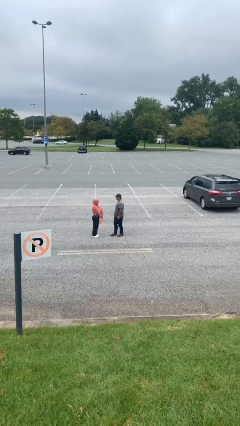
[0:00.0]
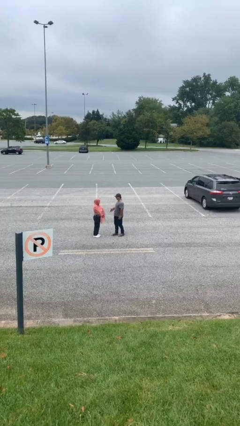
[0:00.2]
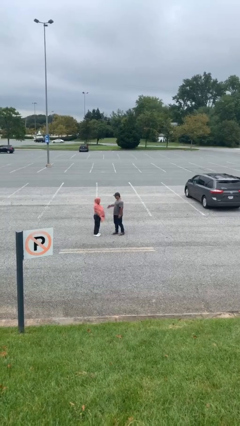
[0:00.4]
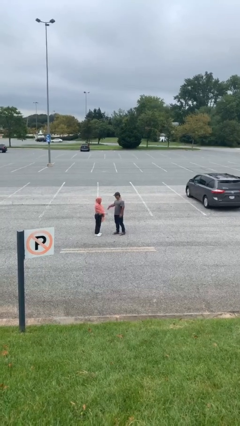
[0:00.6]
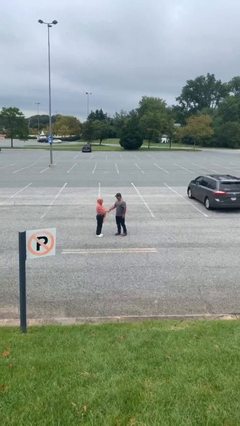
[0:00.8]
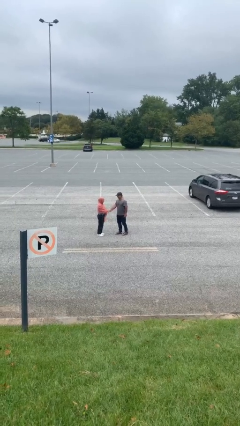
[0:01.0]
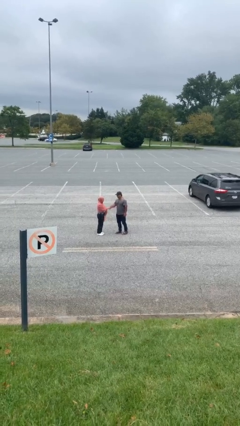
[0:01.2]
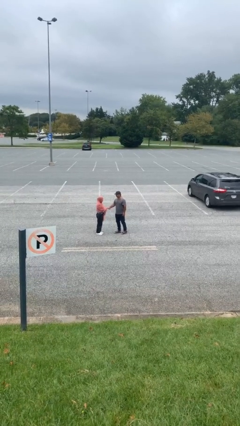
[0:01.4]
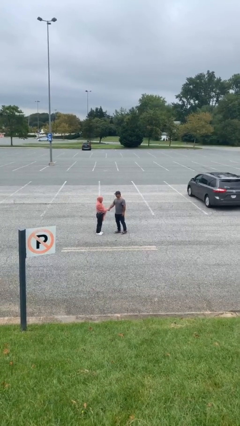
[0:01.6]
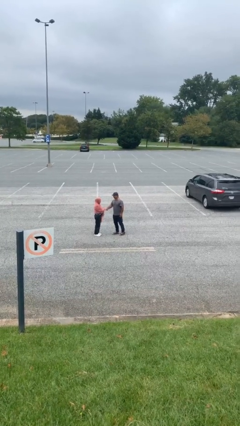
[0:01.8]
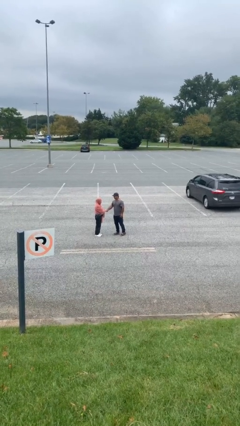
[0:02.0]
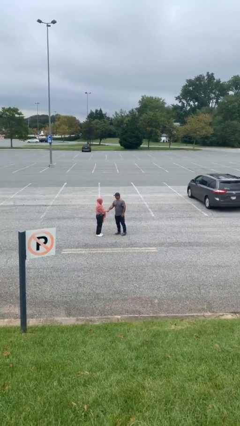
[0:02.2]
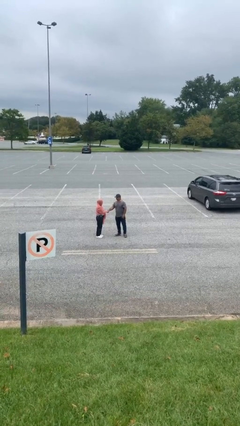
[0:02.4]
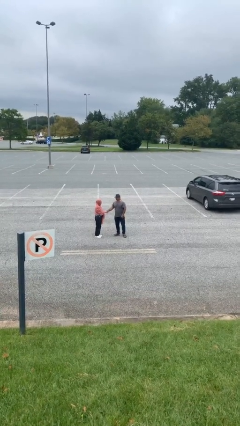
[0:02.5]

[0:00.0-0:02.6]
person shakes hand

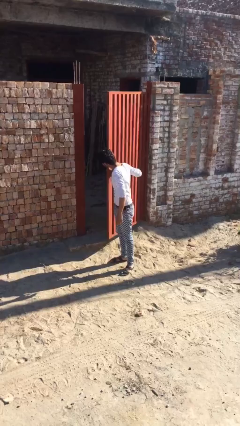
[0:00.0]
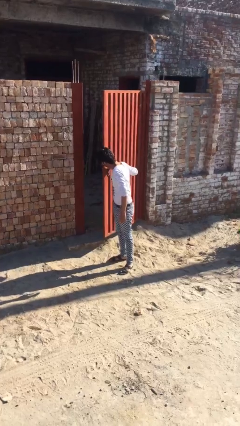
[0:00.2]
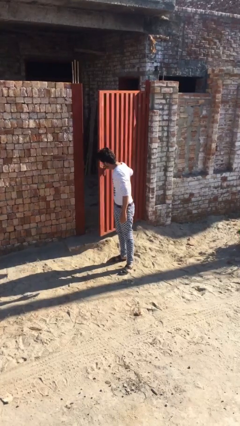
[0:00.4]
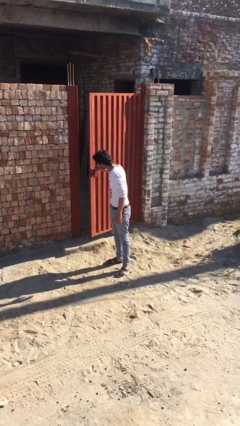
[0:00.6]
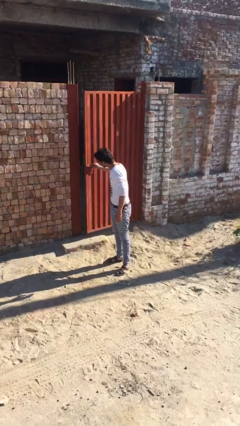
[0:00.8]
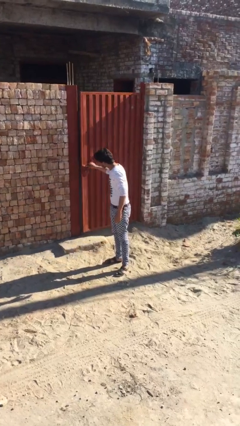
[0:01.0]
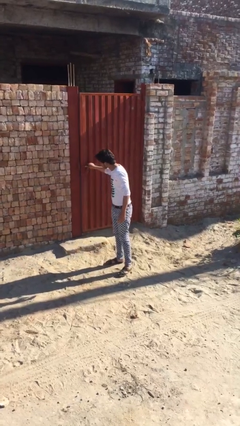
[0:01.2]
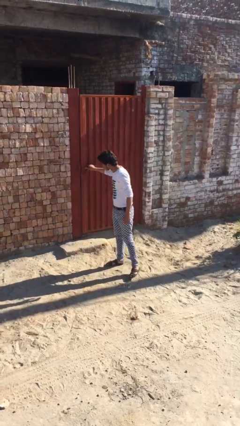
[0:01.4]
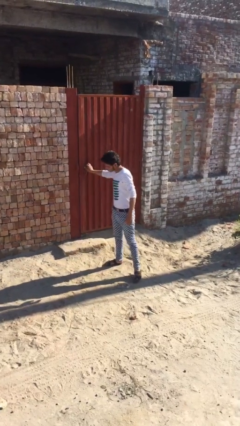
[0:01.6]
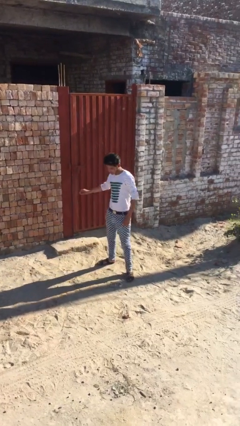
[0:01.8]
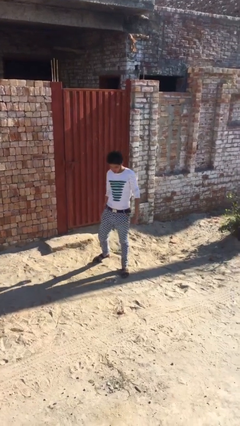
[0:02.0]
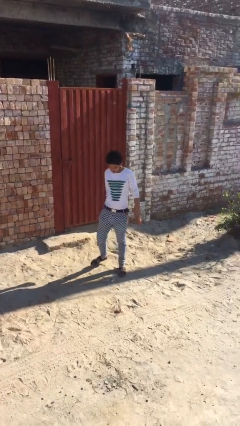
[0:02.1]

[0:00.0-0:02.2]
person closes facility door

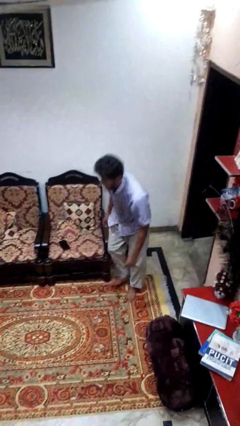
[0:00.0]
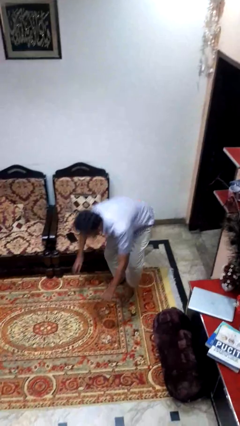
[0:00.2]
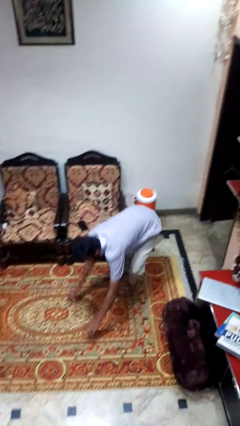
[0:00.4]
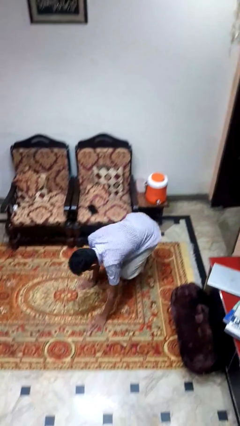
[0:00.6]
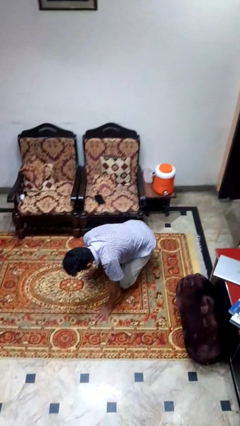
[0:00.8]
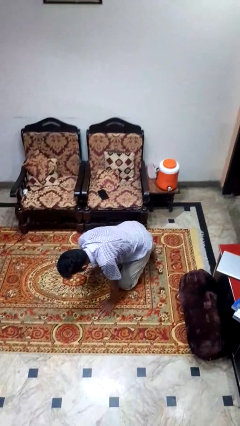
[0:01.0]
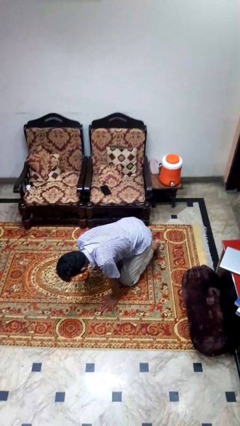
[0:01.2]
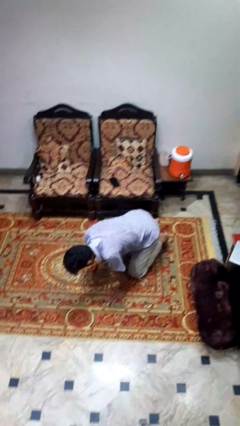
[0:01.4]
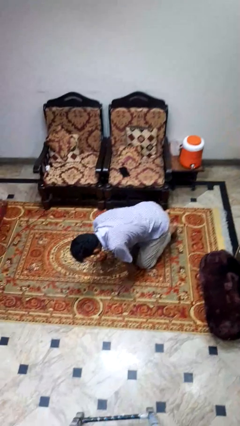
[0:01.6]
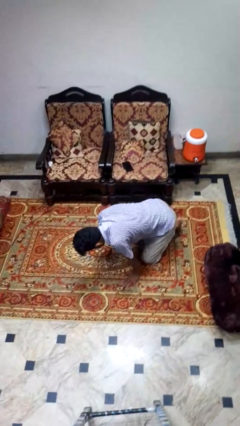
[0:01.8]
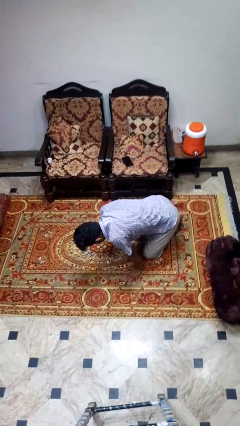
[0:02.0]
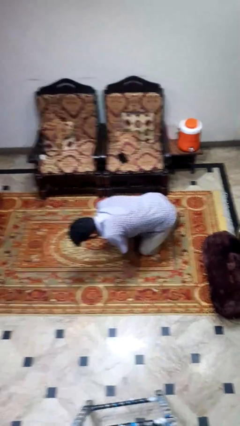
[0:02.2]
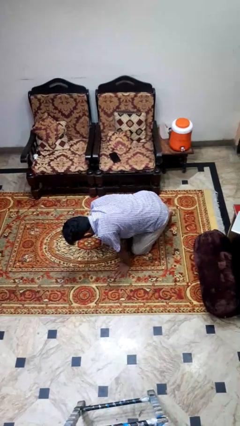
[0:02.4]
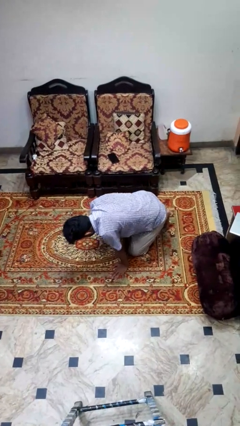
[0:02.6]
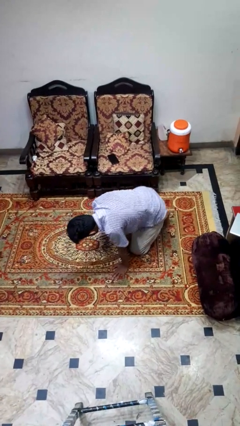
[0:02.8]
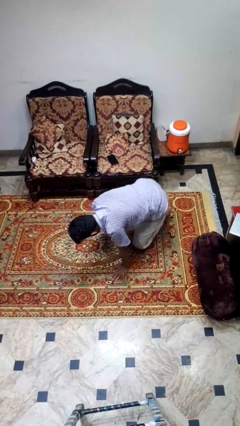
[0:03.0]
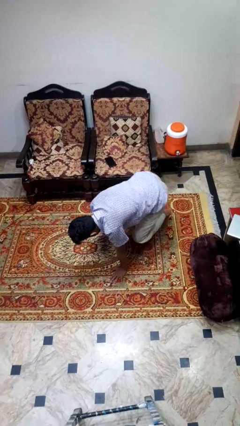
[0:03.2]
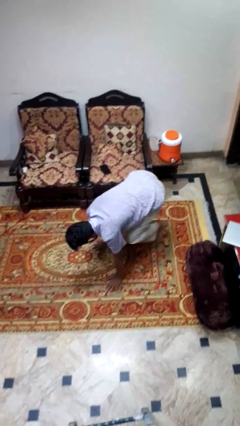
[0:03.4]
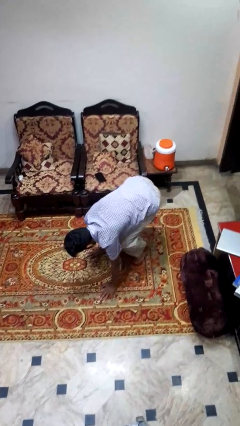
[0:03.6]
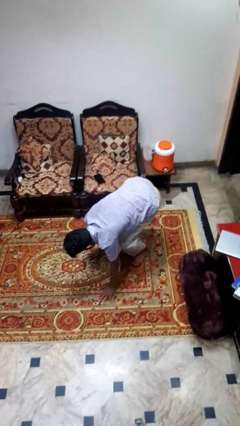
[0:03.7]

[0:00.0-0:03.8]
person trips on object on floor

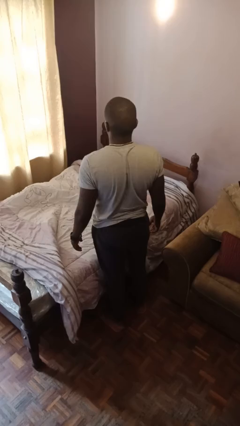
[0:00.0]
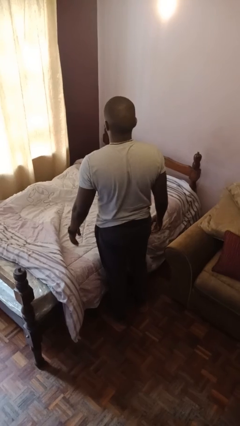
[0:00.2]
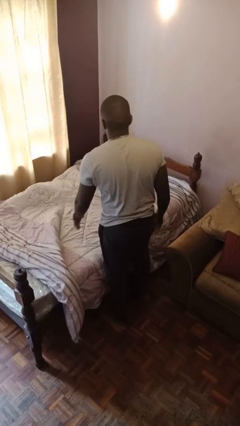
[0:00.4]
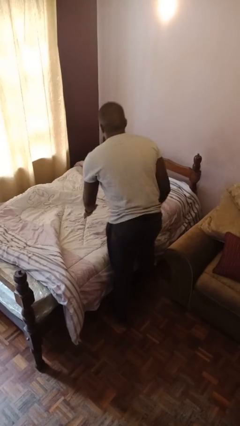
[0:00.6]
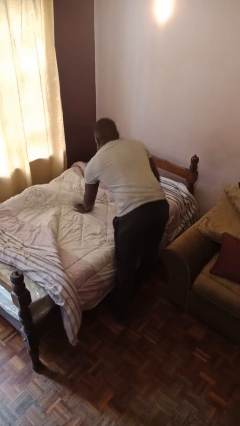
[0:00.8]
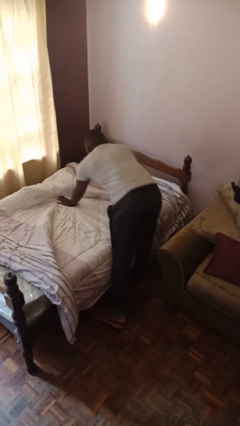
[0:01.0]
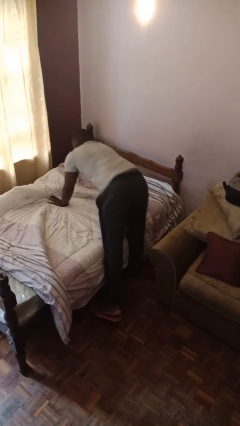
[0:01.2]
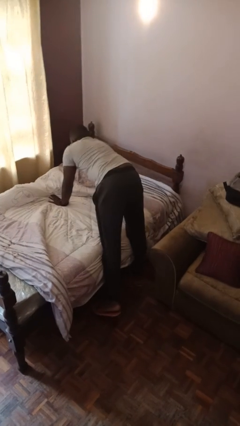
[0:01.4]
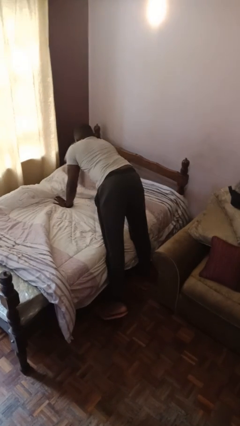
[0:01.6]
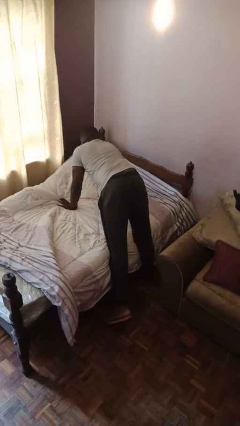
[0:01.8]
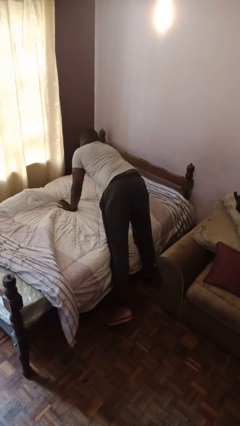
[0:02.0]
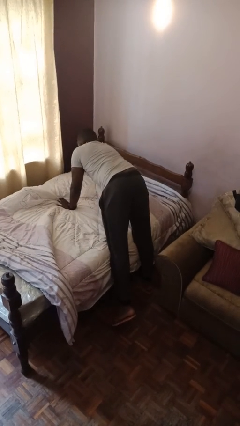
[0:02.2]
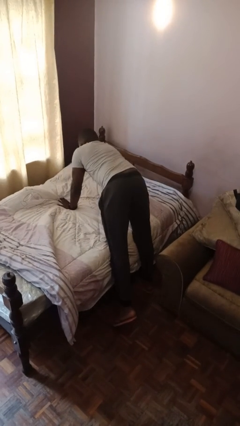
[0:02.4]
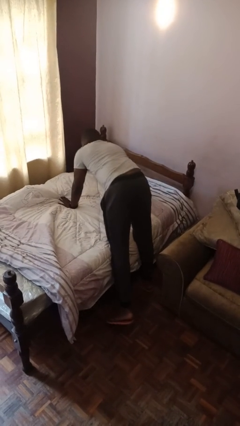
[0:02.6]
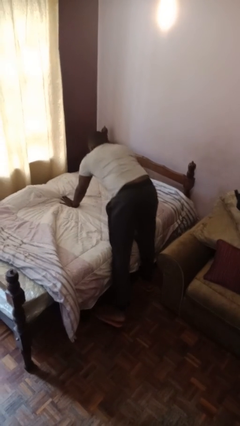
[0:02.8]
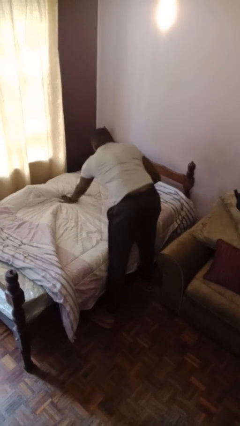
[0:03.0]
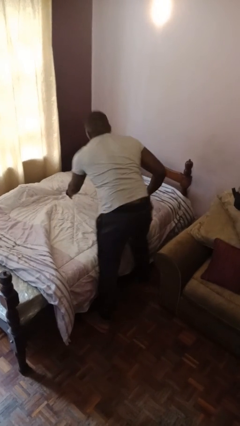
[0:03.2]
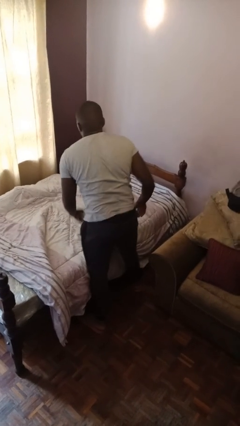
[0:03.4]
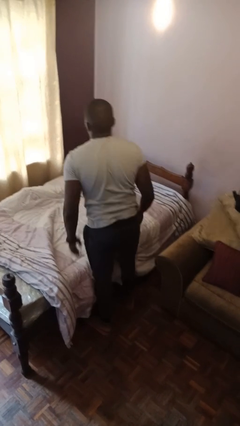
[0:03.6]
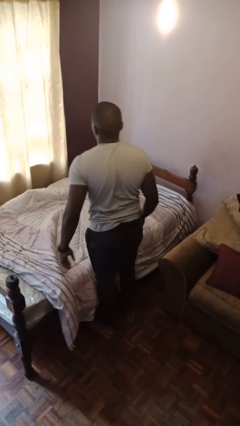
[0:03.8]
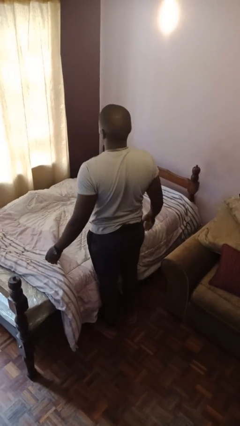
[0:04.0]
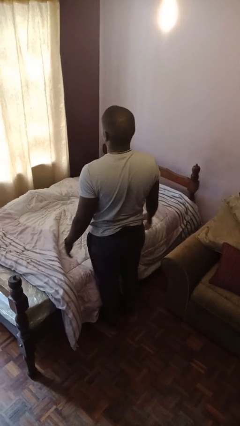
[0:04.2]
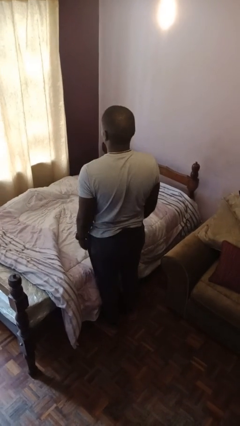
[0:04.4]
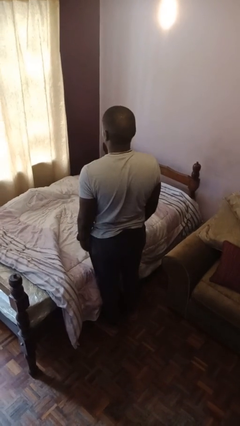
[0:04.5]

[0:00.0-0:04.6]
person makes bed

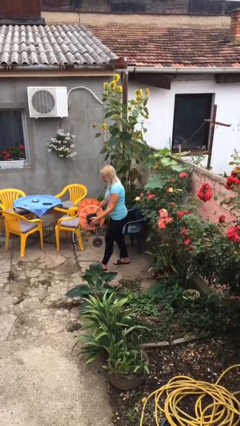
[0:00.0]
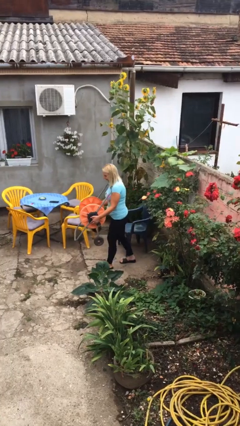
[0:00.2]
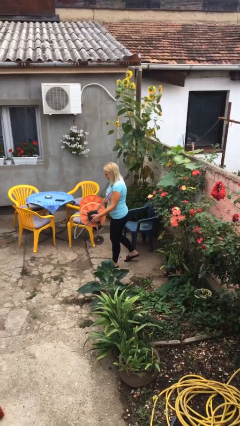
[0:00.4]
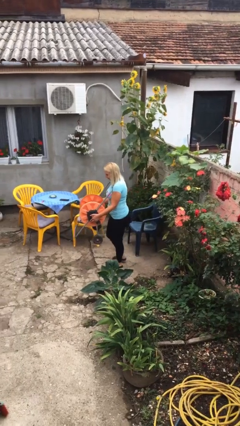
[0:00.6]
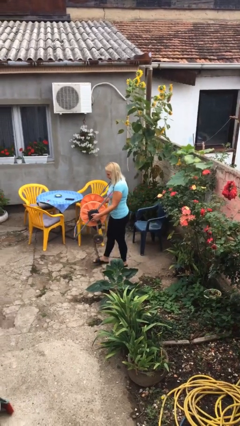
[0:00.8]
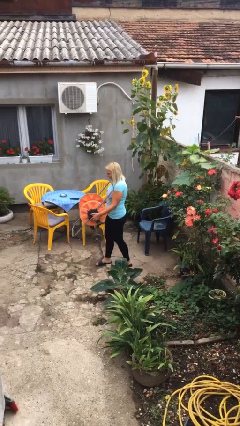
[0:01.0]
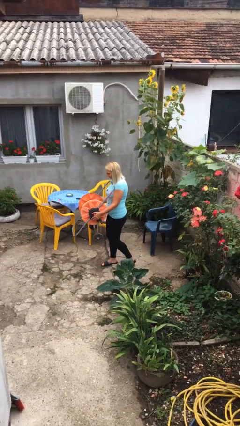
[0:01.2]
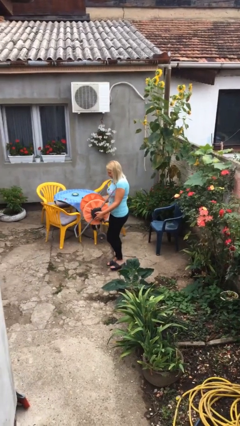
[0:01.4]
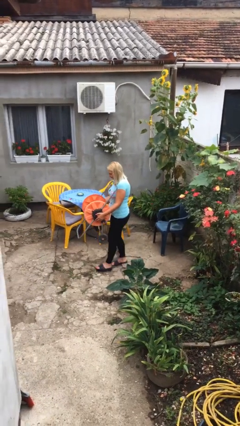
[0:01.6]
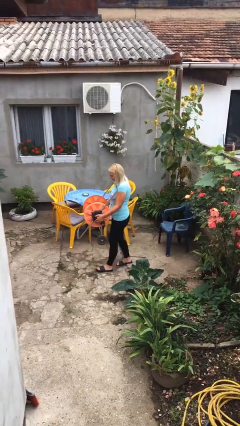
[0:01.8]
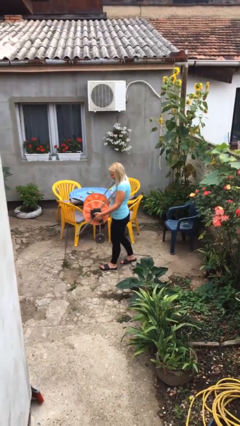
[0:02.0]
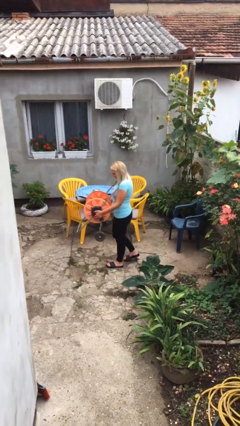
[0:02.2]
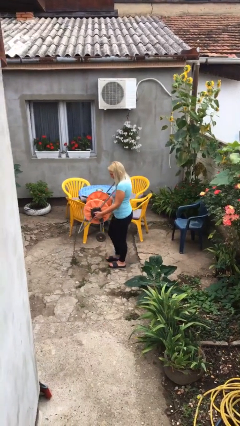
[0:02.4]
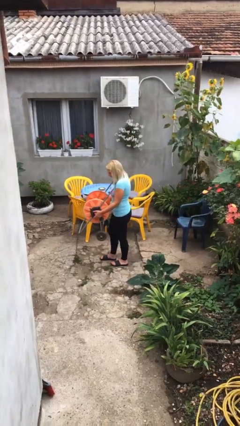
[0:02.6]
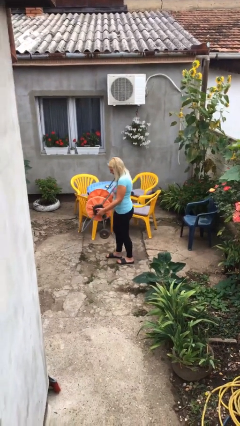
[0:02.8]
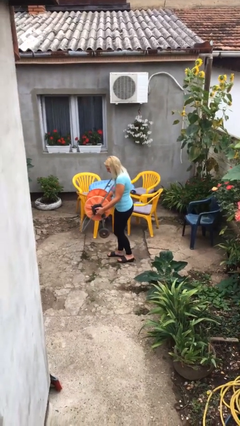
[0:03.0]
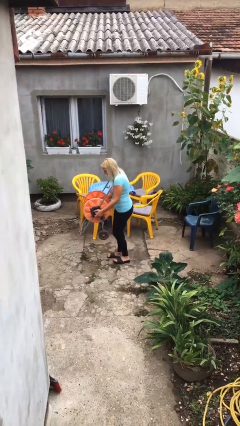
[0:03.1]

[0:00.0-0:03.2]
person carries heavy object

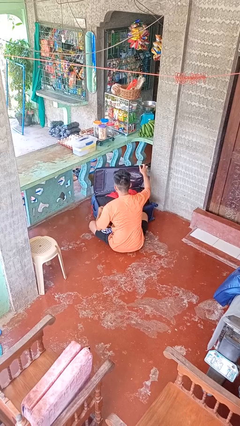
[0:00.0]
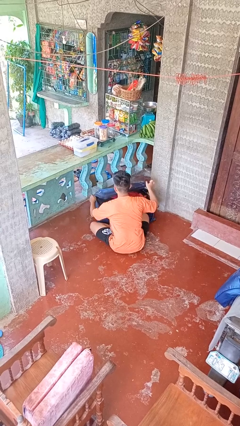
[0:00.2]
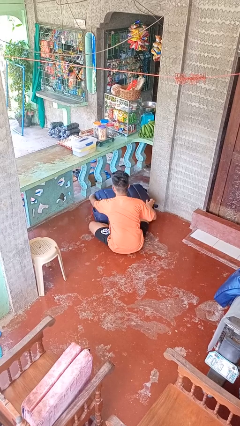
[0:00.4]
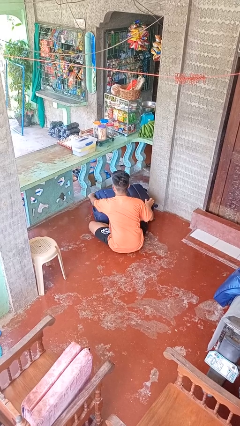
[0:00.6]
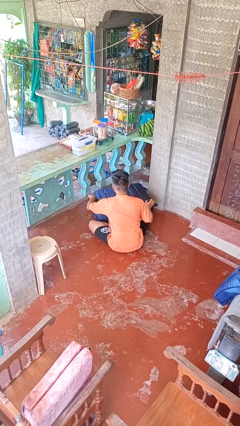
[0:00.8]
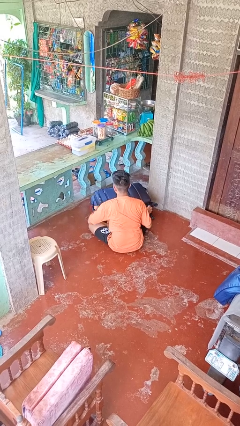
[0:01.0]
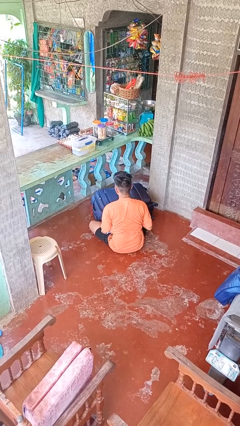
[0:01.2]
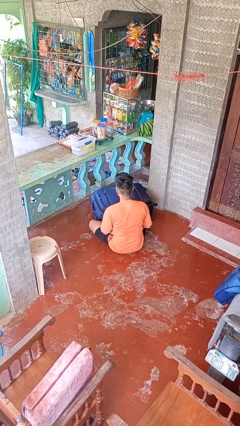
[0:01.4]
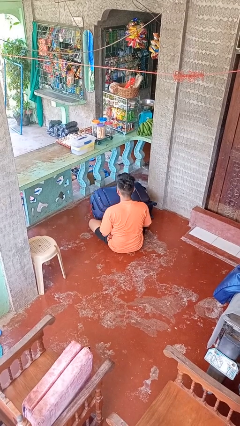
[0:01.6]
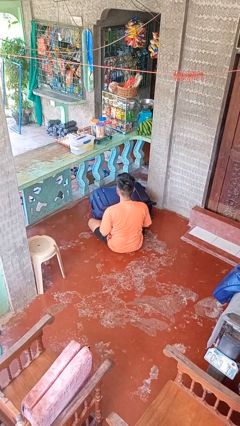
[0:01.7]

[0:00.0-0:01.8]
person closes suitcase
